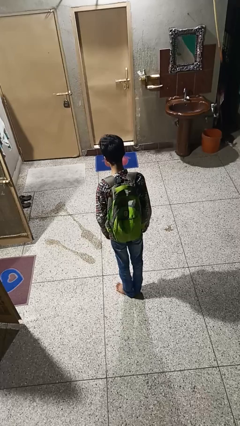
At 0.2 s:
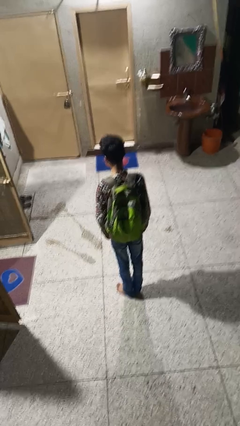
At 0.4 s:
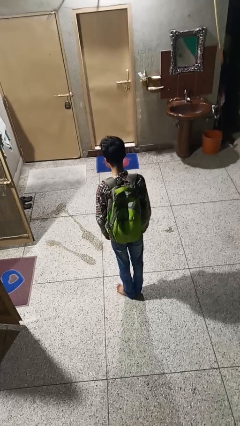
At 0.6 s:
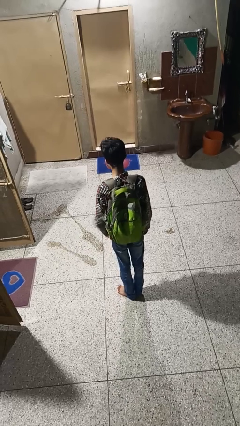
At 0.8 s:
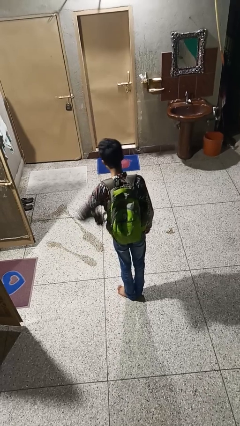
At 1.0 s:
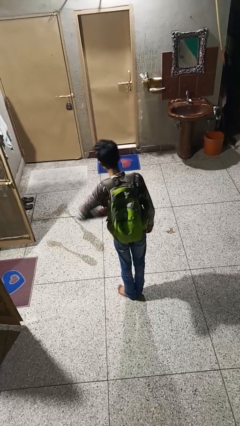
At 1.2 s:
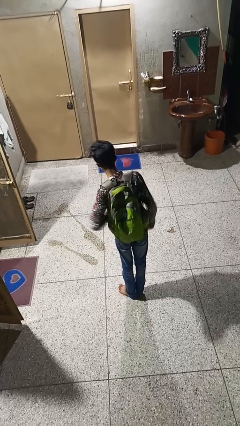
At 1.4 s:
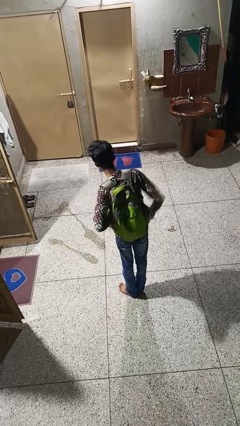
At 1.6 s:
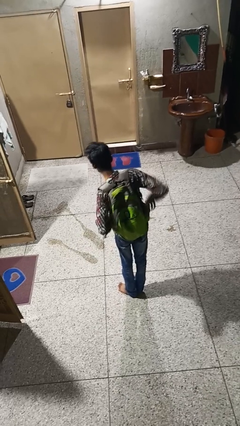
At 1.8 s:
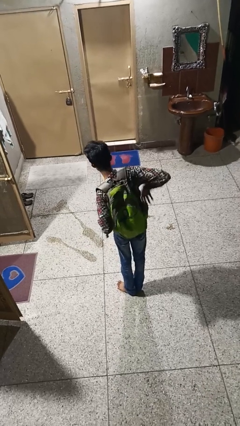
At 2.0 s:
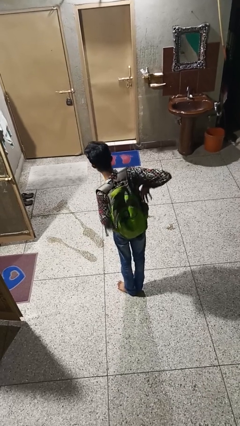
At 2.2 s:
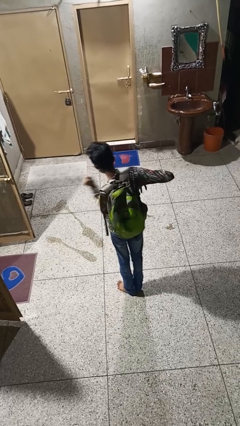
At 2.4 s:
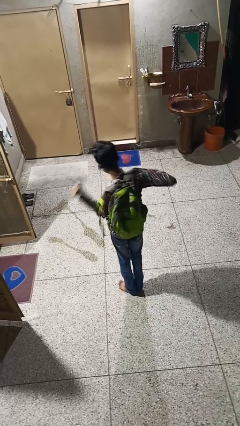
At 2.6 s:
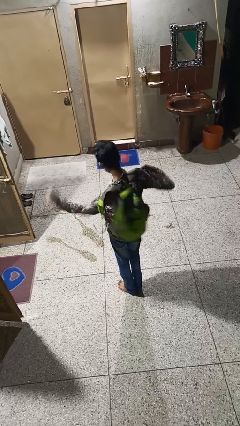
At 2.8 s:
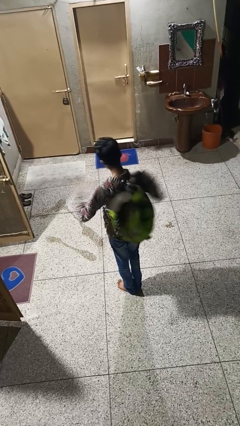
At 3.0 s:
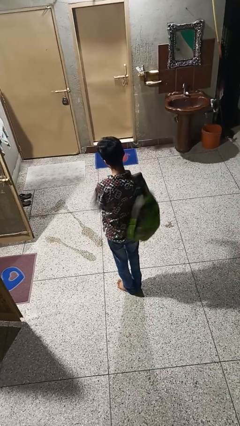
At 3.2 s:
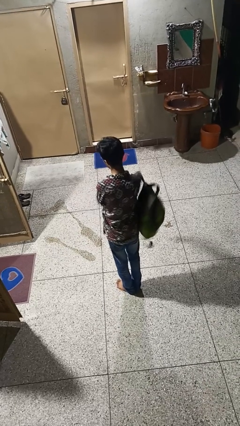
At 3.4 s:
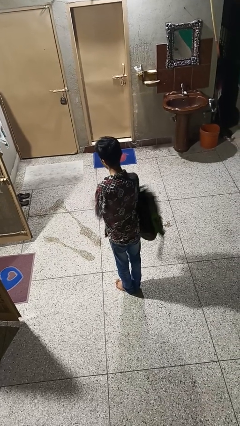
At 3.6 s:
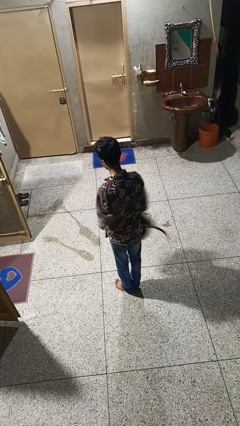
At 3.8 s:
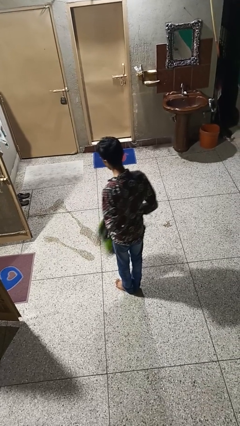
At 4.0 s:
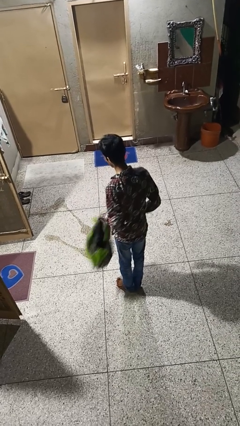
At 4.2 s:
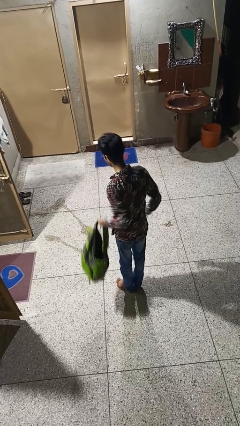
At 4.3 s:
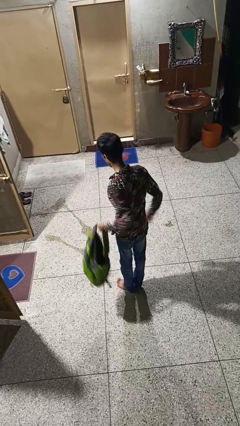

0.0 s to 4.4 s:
person takes off backpack

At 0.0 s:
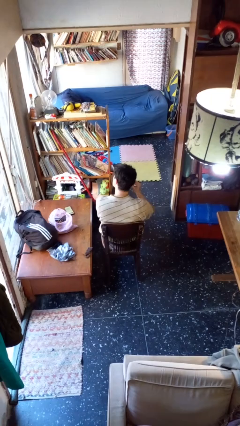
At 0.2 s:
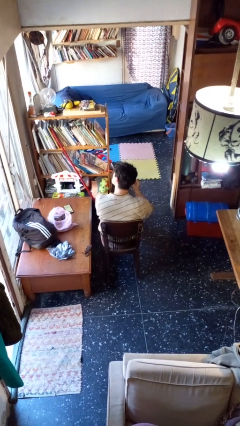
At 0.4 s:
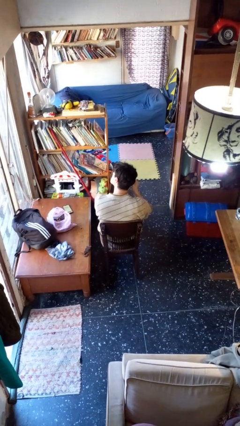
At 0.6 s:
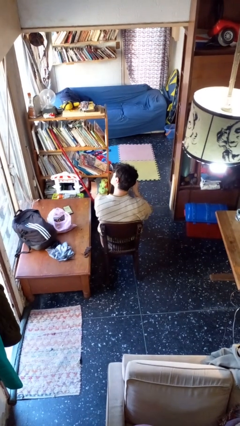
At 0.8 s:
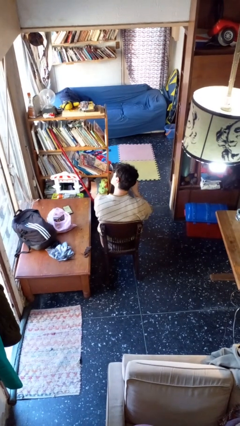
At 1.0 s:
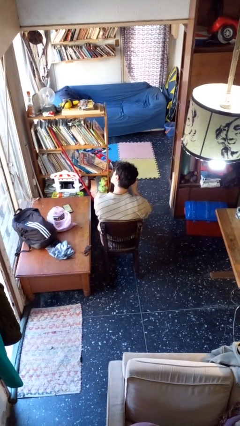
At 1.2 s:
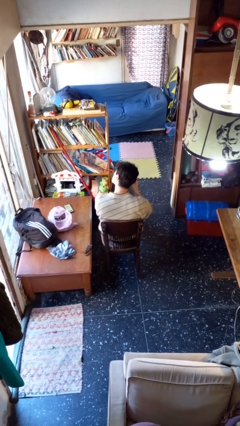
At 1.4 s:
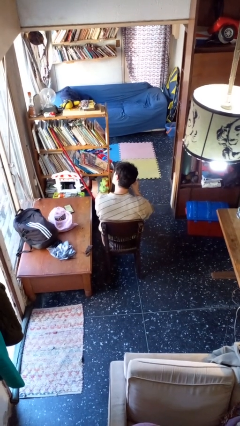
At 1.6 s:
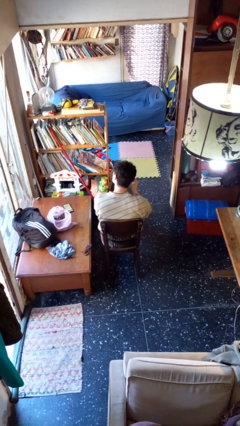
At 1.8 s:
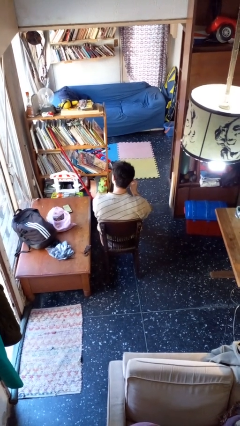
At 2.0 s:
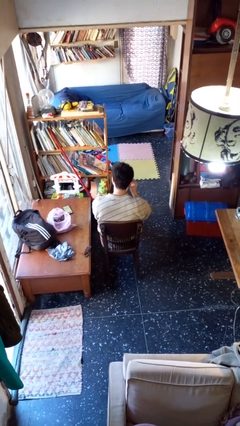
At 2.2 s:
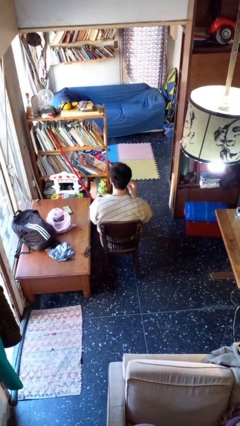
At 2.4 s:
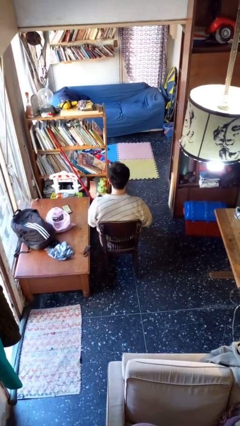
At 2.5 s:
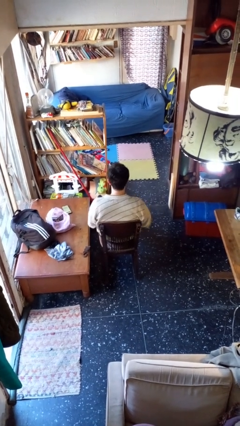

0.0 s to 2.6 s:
person puts on earrings

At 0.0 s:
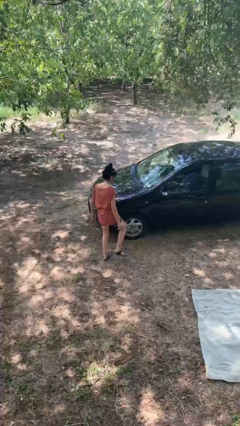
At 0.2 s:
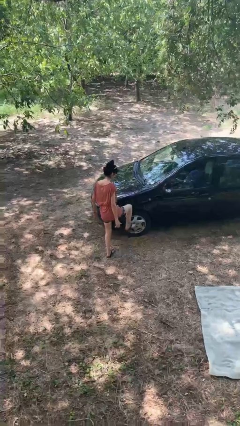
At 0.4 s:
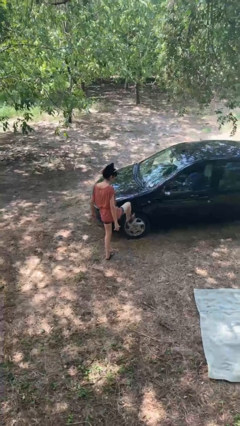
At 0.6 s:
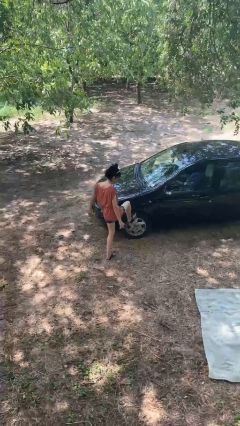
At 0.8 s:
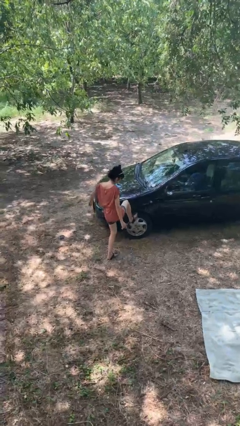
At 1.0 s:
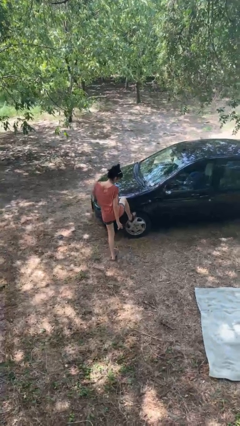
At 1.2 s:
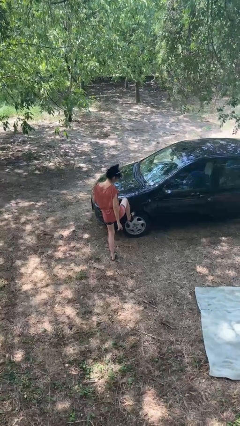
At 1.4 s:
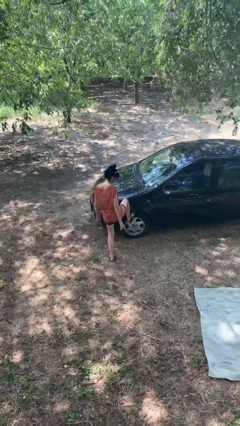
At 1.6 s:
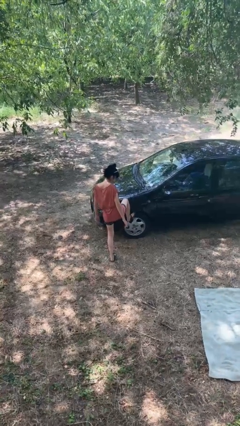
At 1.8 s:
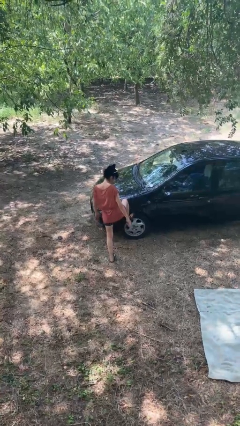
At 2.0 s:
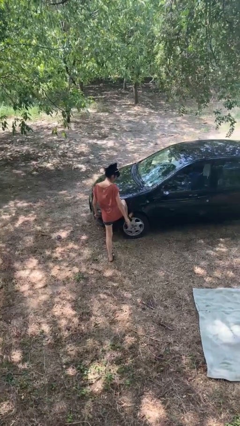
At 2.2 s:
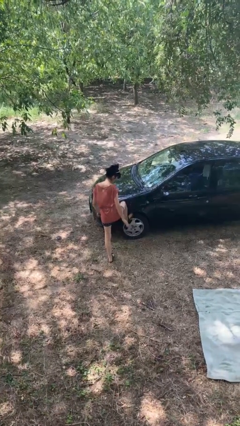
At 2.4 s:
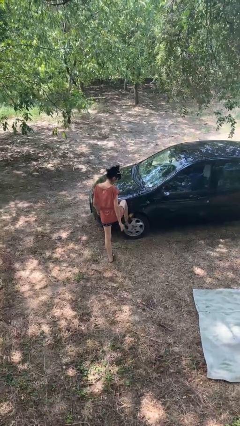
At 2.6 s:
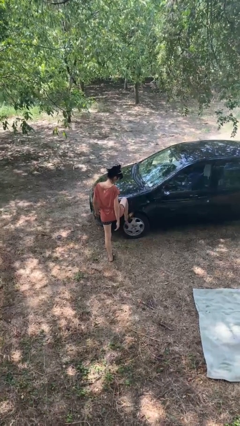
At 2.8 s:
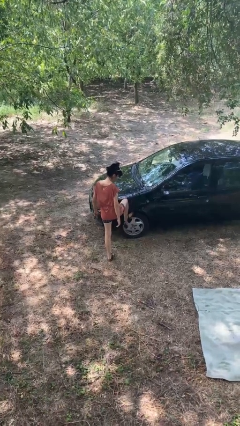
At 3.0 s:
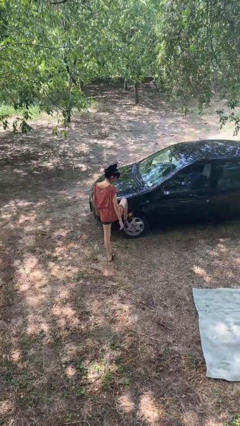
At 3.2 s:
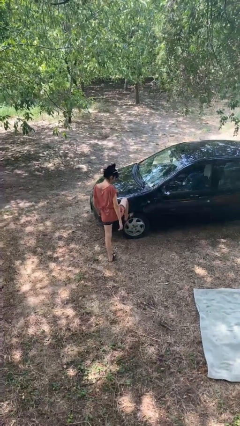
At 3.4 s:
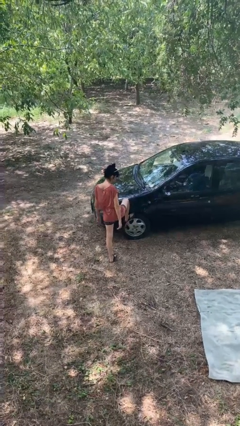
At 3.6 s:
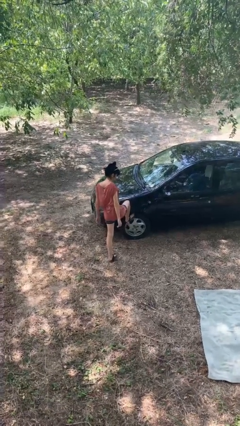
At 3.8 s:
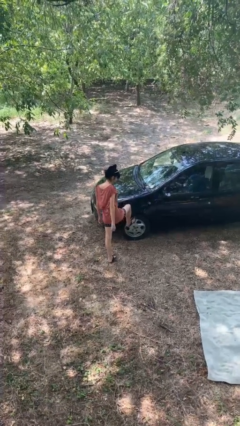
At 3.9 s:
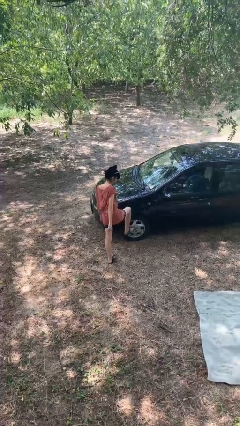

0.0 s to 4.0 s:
person kicks car tires

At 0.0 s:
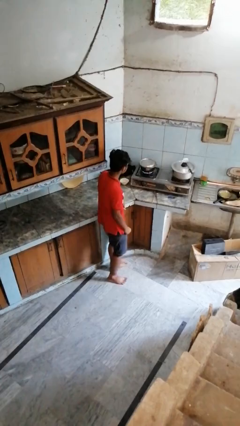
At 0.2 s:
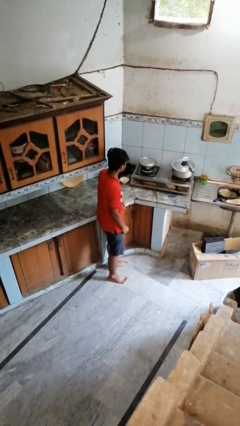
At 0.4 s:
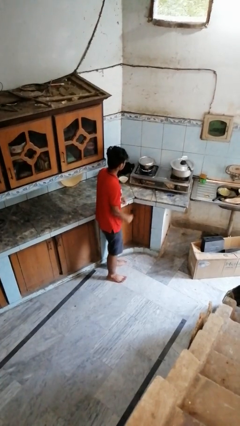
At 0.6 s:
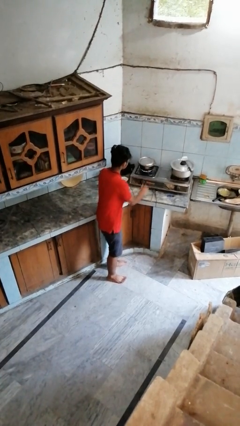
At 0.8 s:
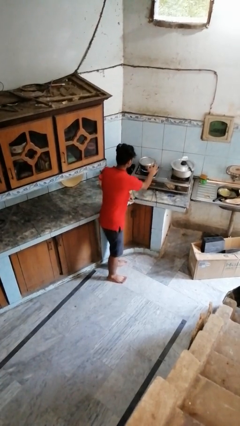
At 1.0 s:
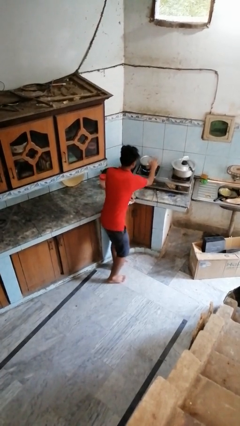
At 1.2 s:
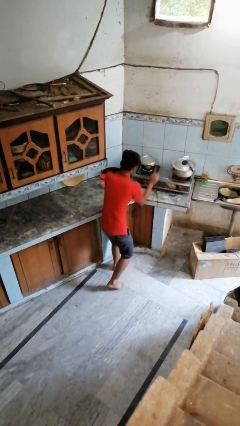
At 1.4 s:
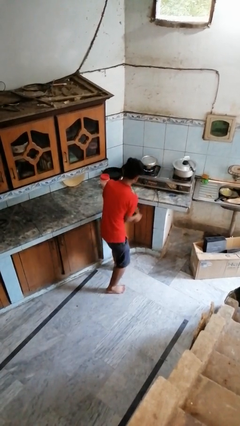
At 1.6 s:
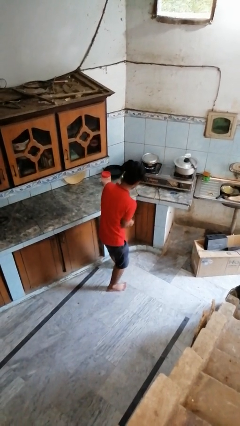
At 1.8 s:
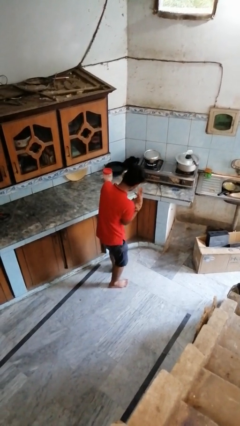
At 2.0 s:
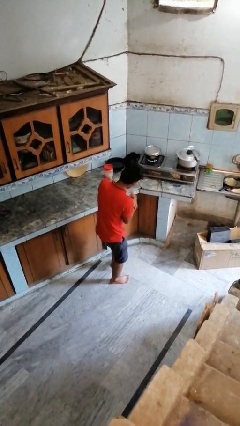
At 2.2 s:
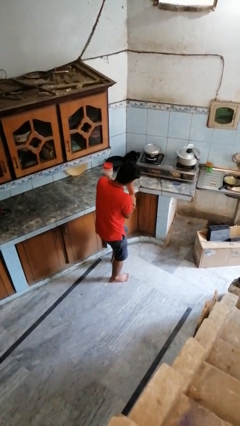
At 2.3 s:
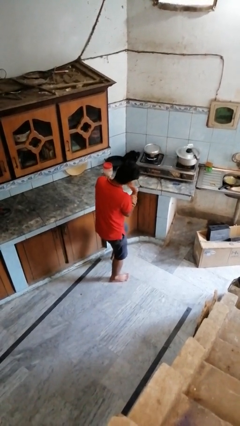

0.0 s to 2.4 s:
person burns hand

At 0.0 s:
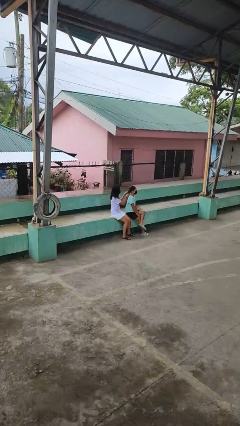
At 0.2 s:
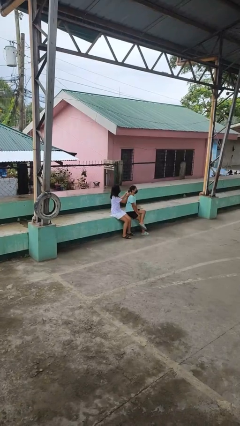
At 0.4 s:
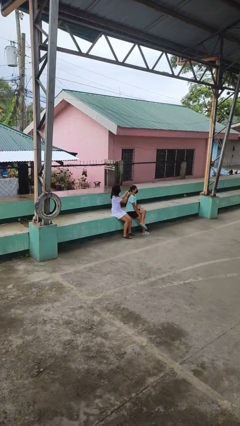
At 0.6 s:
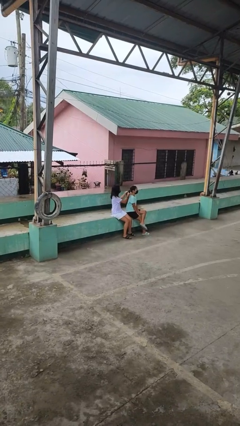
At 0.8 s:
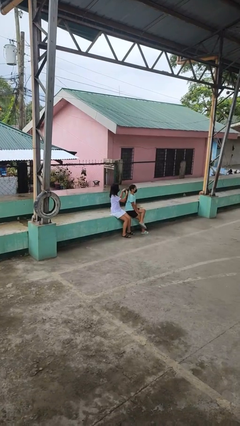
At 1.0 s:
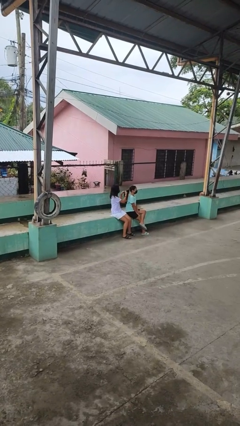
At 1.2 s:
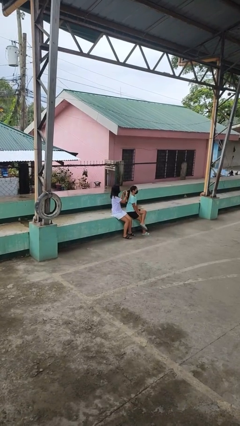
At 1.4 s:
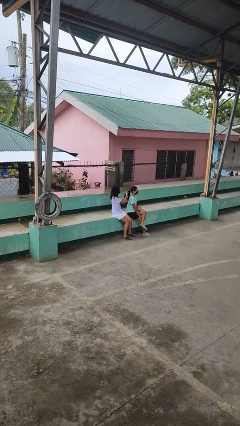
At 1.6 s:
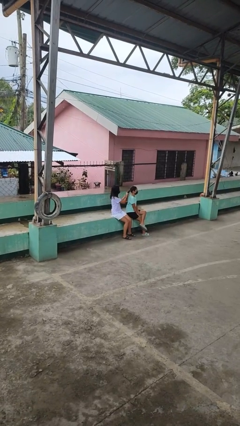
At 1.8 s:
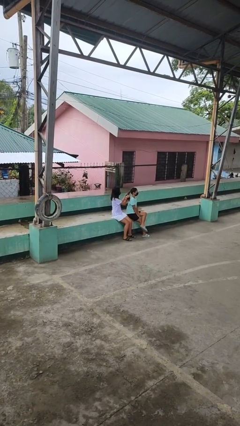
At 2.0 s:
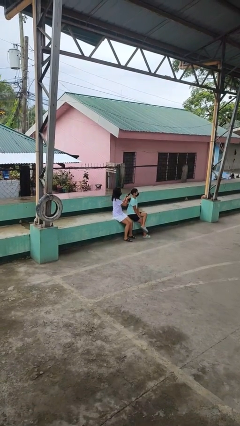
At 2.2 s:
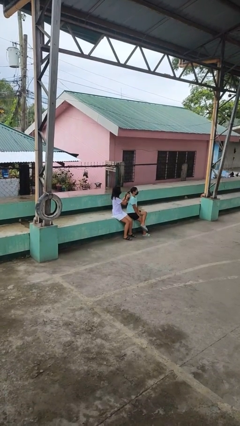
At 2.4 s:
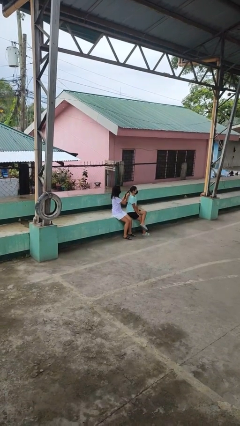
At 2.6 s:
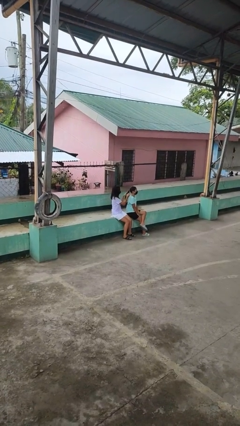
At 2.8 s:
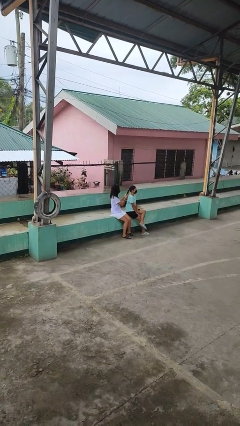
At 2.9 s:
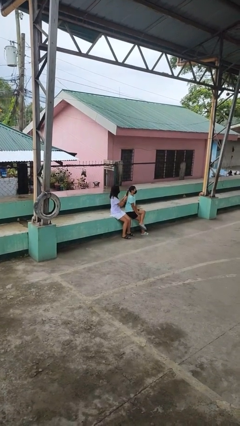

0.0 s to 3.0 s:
person braids hair of person

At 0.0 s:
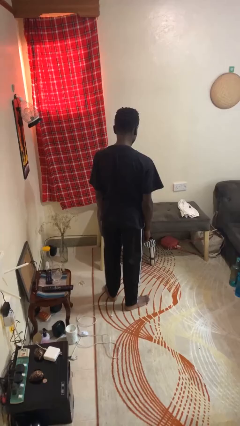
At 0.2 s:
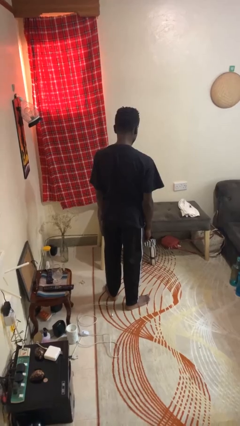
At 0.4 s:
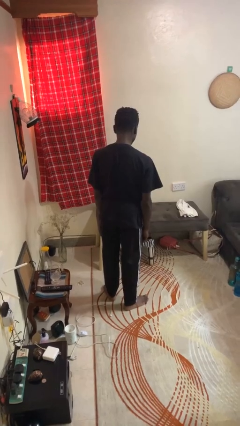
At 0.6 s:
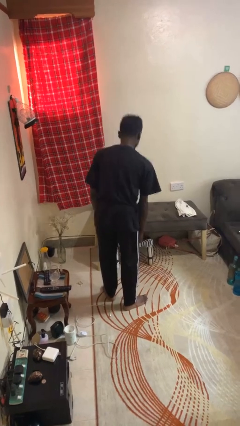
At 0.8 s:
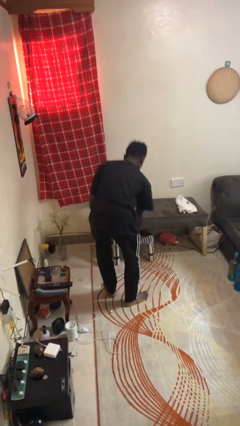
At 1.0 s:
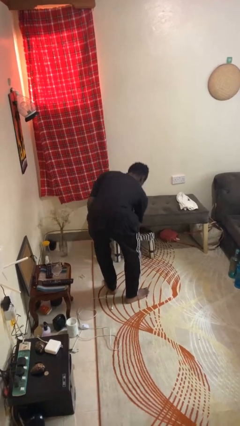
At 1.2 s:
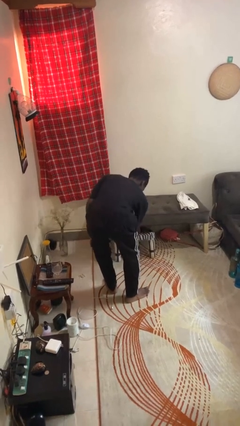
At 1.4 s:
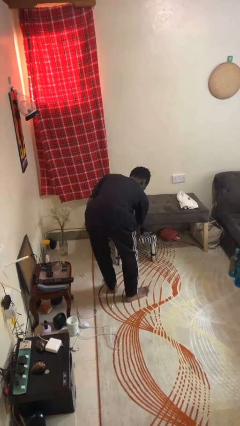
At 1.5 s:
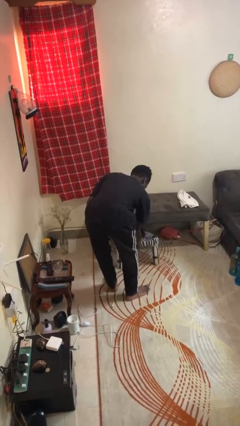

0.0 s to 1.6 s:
person pulls out chair
